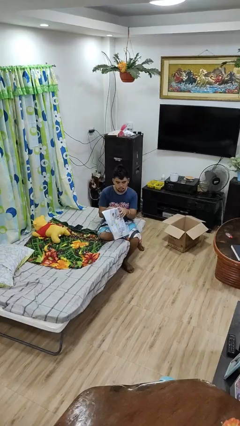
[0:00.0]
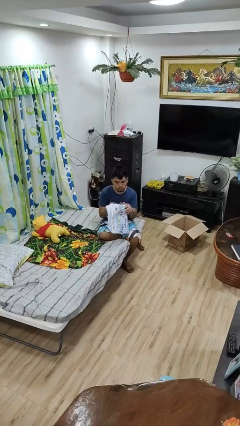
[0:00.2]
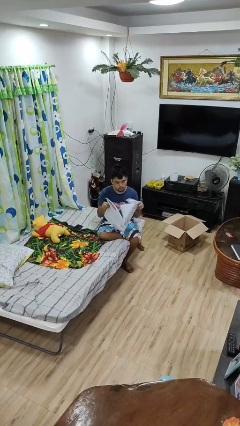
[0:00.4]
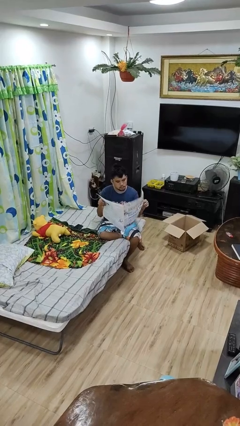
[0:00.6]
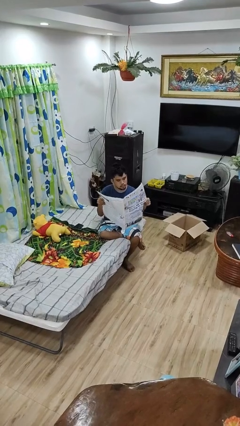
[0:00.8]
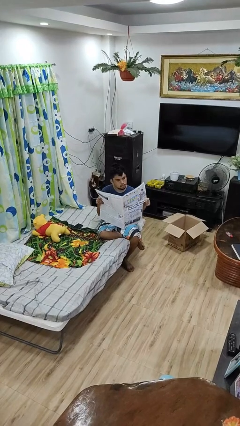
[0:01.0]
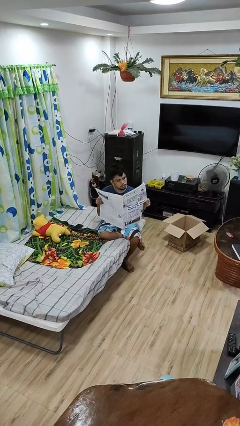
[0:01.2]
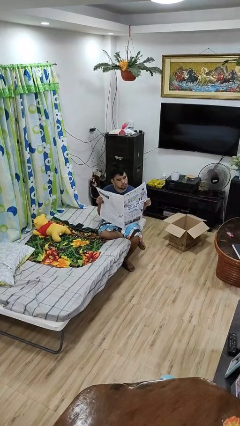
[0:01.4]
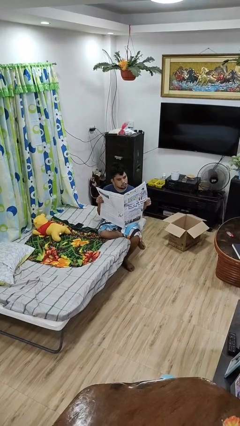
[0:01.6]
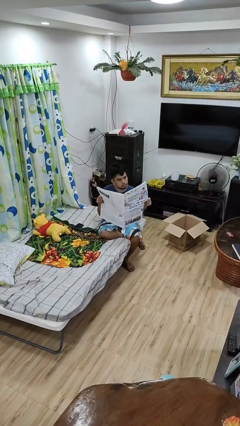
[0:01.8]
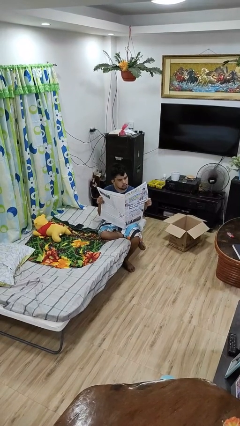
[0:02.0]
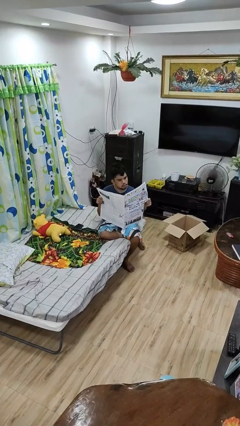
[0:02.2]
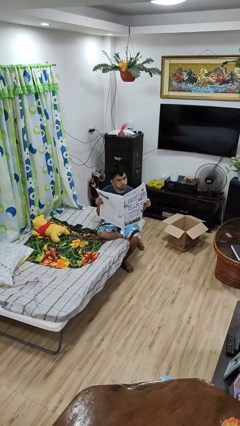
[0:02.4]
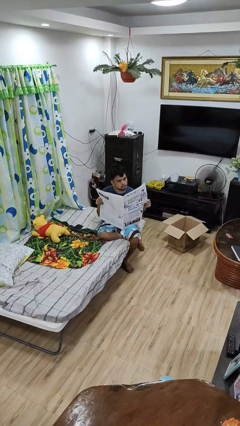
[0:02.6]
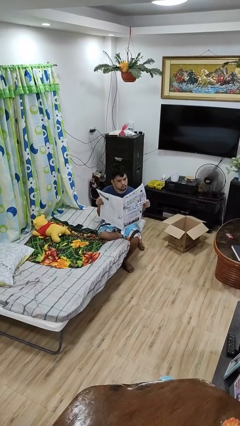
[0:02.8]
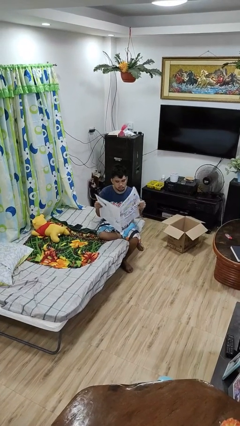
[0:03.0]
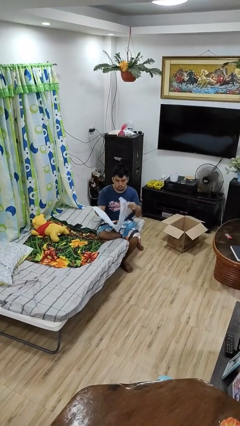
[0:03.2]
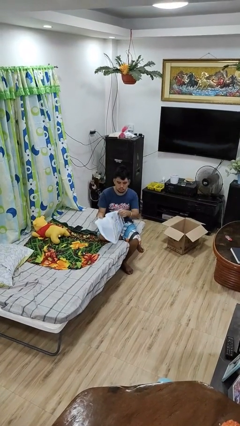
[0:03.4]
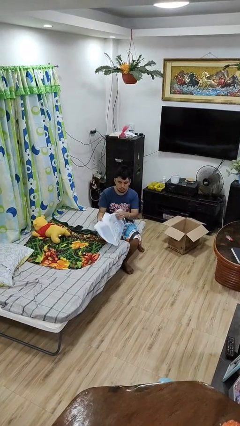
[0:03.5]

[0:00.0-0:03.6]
person reads newspaper

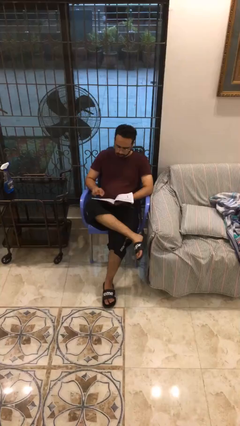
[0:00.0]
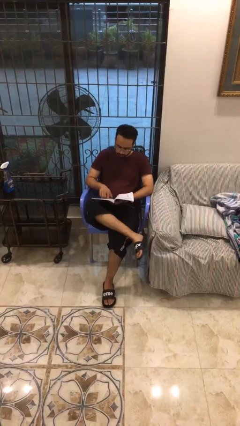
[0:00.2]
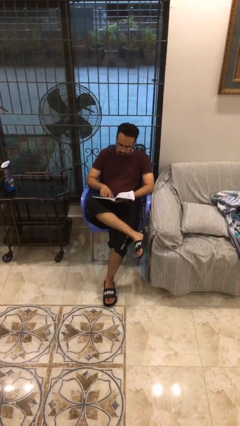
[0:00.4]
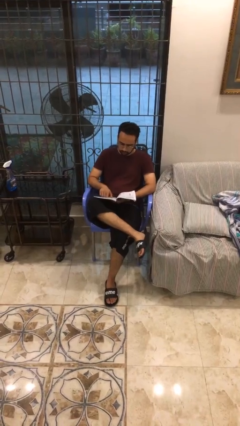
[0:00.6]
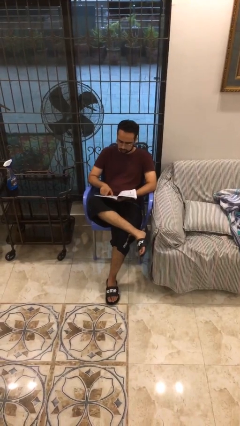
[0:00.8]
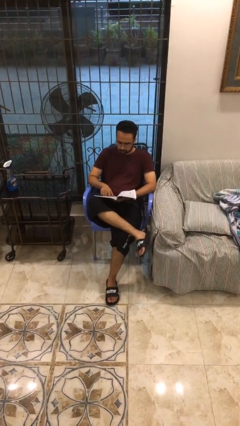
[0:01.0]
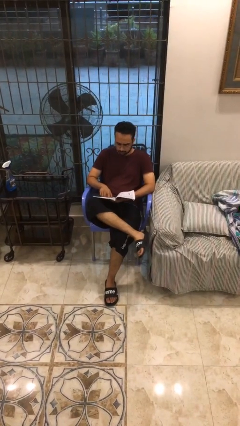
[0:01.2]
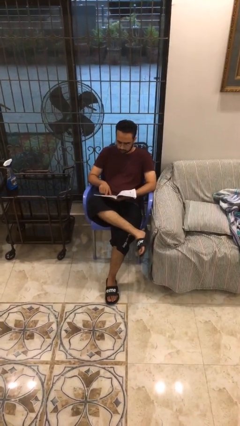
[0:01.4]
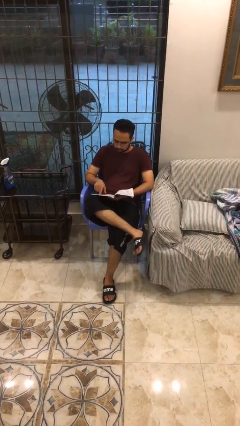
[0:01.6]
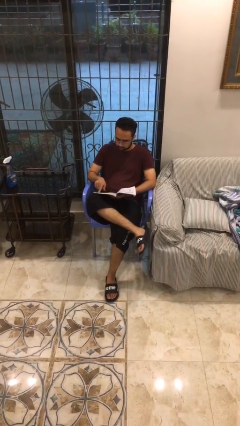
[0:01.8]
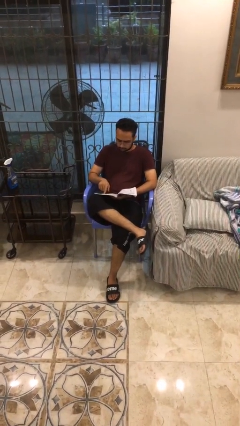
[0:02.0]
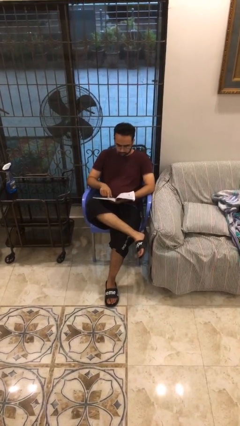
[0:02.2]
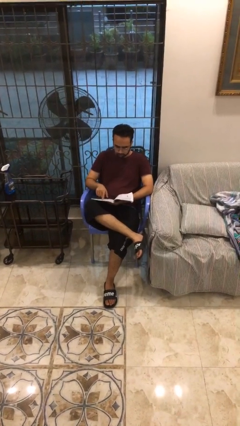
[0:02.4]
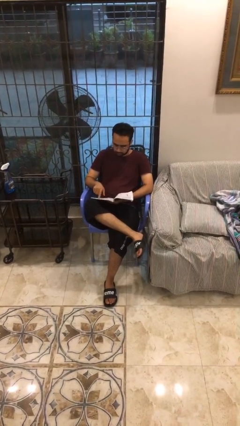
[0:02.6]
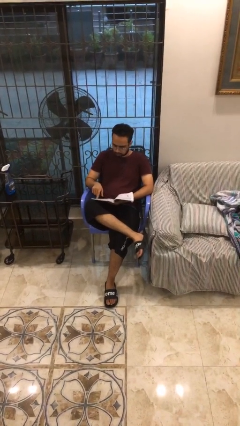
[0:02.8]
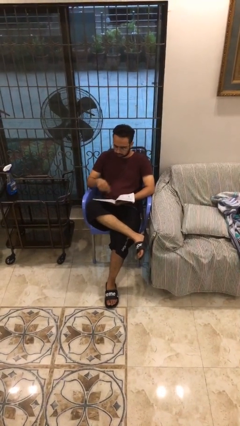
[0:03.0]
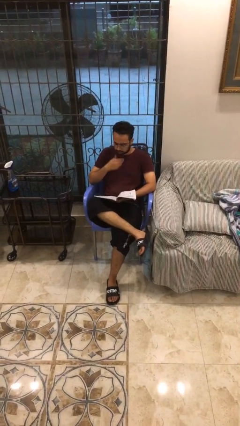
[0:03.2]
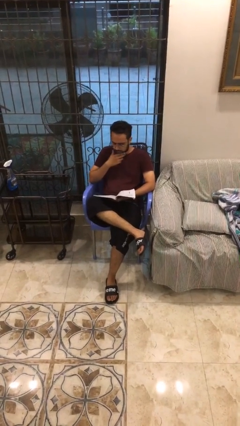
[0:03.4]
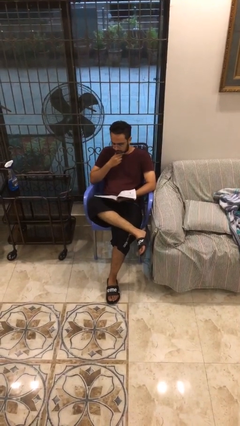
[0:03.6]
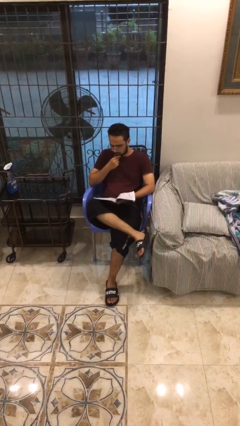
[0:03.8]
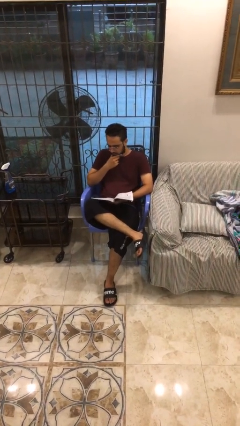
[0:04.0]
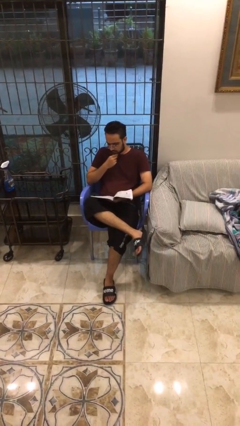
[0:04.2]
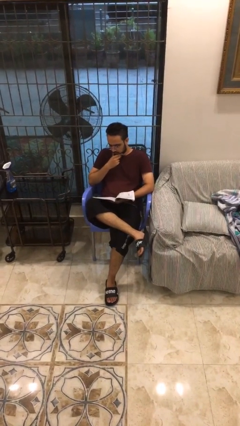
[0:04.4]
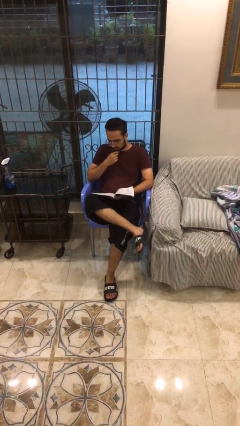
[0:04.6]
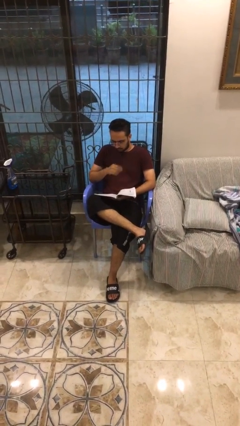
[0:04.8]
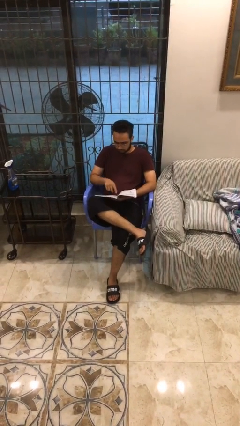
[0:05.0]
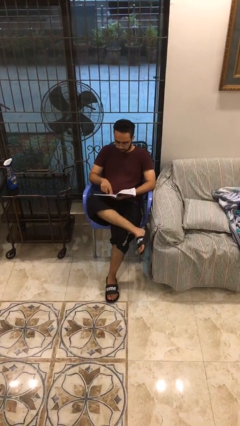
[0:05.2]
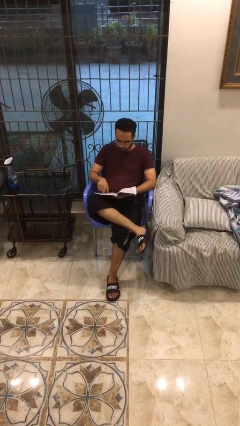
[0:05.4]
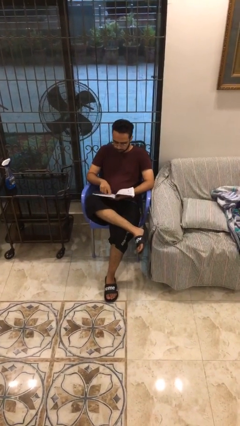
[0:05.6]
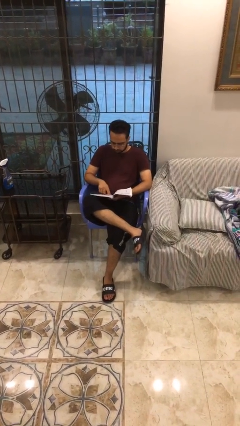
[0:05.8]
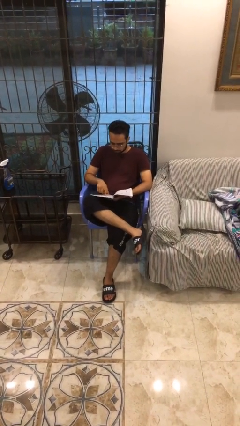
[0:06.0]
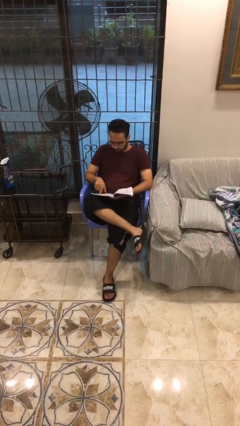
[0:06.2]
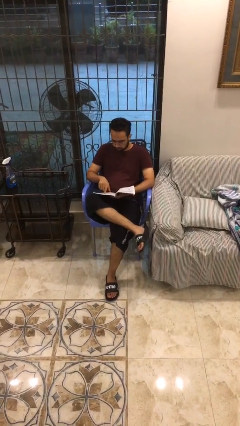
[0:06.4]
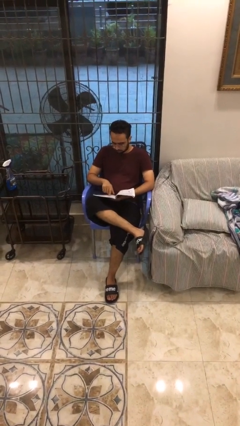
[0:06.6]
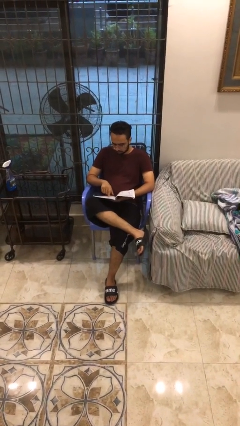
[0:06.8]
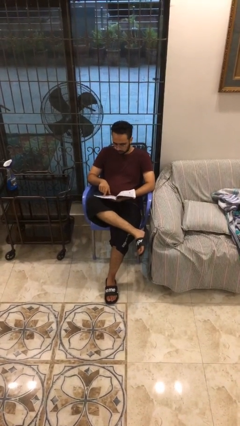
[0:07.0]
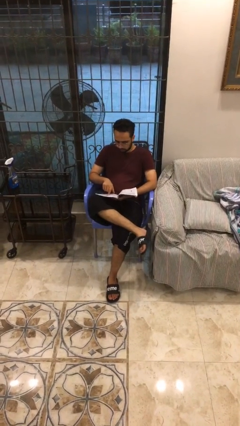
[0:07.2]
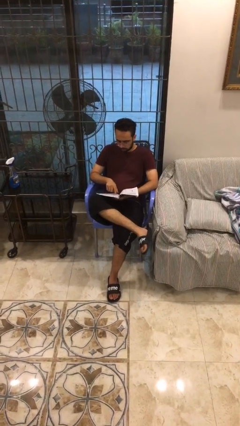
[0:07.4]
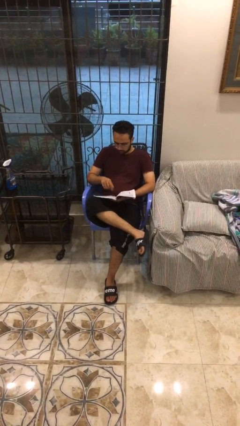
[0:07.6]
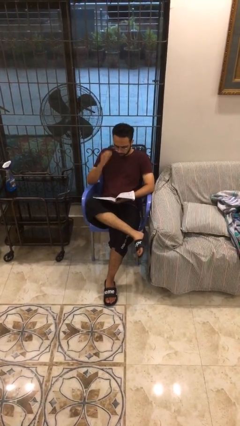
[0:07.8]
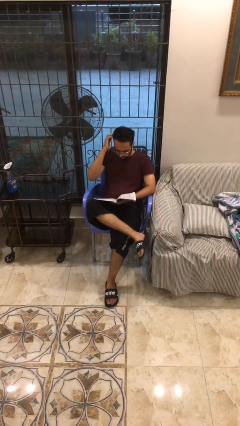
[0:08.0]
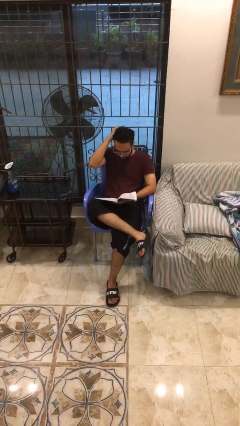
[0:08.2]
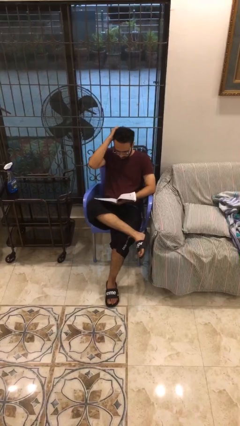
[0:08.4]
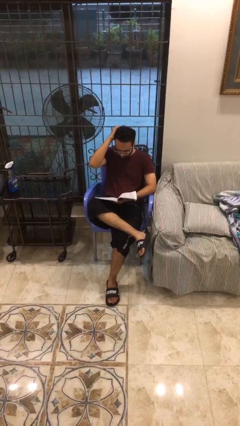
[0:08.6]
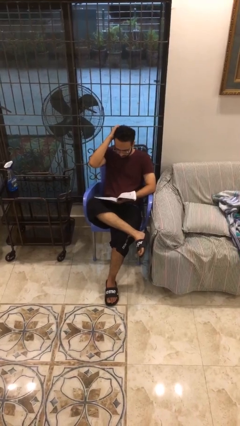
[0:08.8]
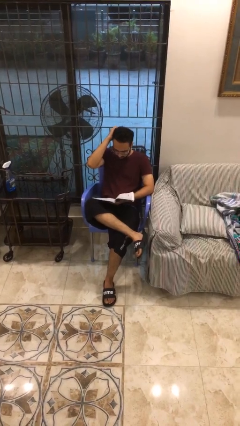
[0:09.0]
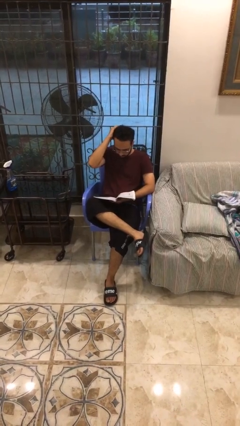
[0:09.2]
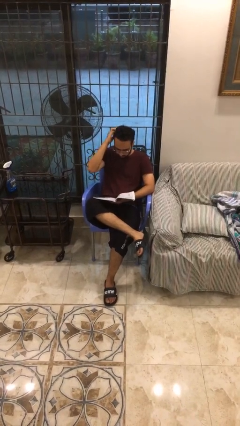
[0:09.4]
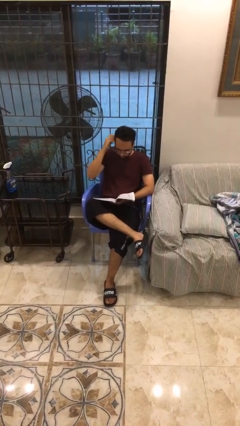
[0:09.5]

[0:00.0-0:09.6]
person reads document

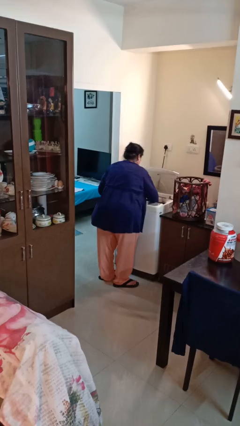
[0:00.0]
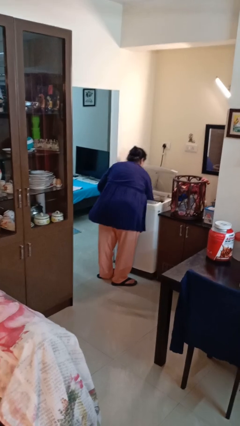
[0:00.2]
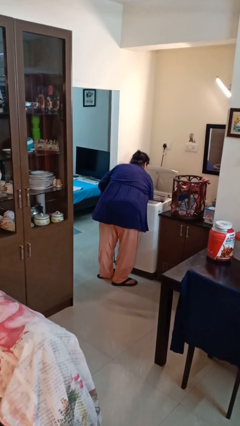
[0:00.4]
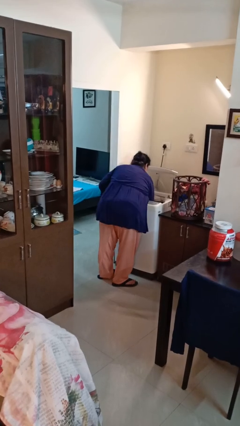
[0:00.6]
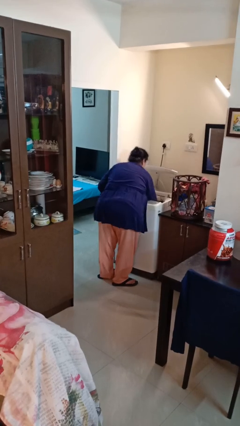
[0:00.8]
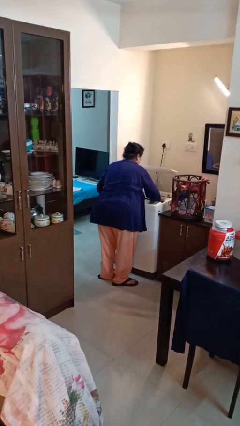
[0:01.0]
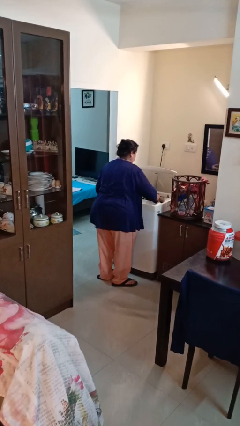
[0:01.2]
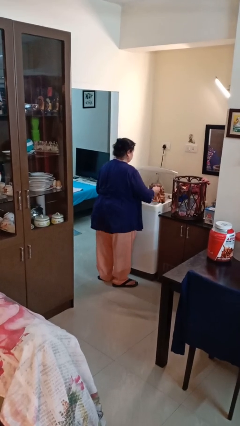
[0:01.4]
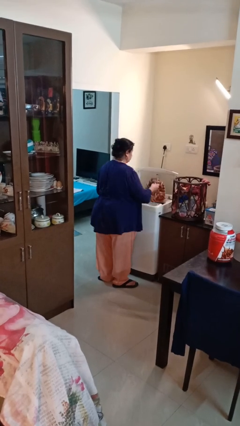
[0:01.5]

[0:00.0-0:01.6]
person unloads clotheswasher

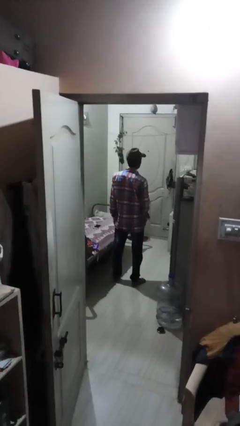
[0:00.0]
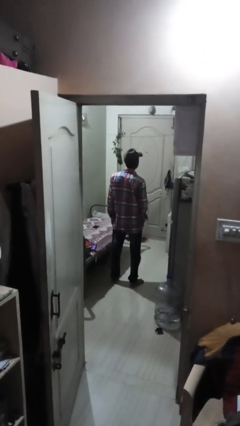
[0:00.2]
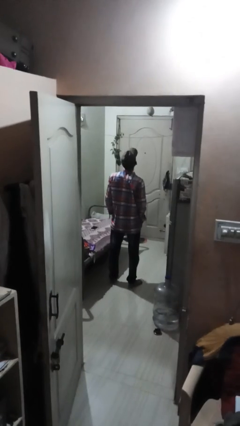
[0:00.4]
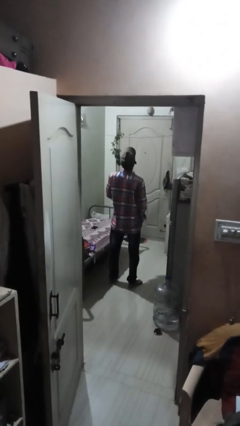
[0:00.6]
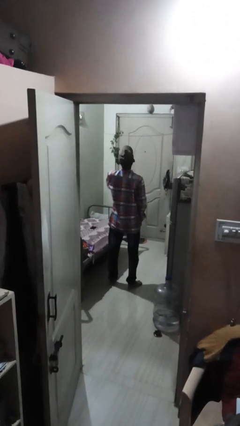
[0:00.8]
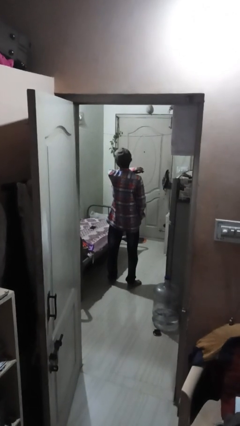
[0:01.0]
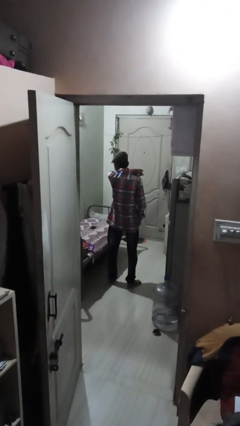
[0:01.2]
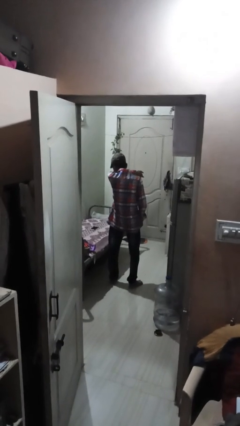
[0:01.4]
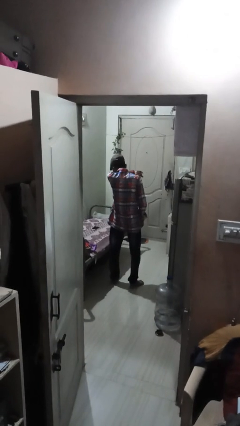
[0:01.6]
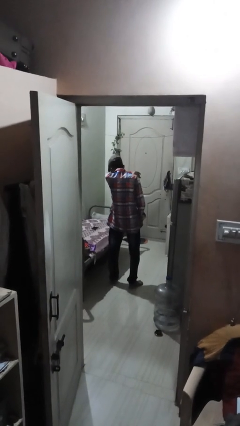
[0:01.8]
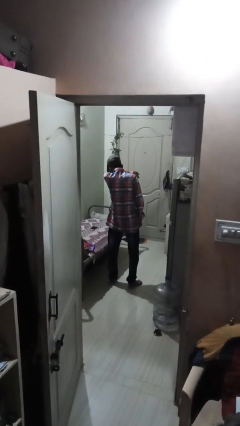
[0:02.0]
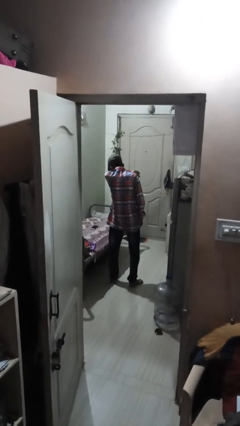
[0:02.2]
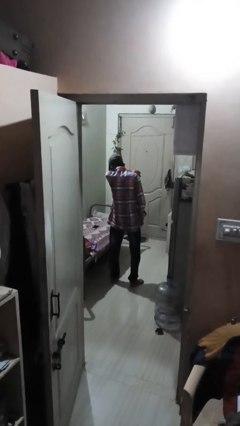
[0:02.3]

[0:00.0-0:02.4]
person sneezes into arm

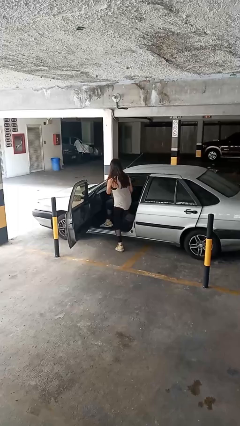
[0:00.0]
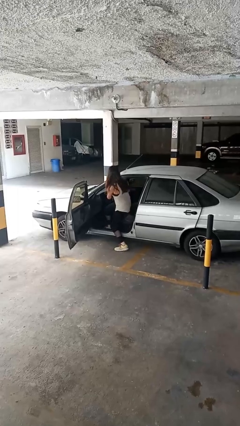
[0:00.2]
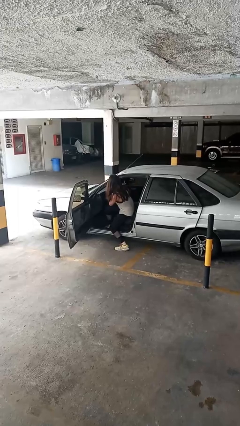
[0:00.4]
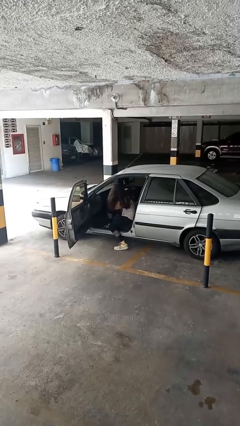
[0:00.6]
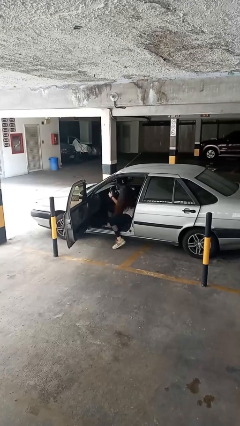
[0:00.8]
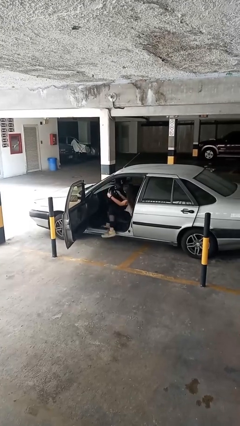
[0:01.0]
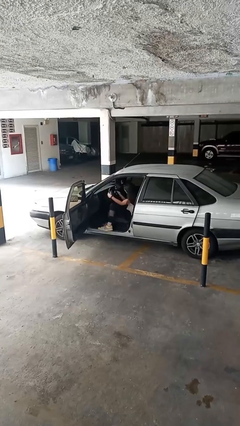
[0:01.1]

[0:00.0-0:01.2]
person enters car
